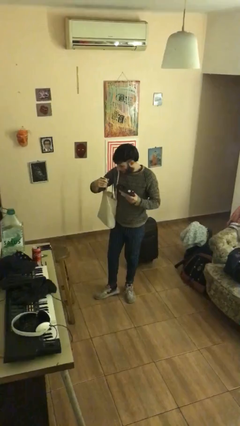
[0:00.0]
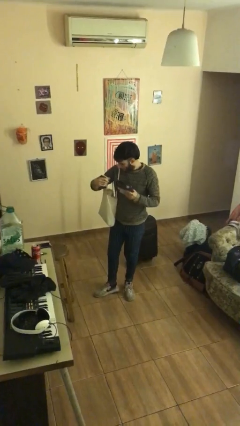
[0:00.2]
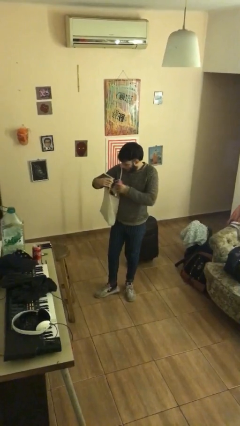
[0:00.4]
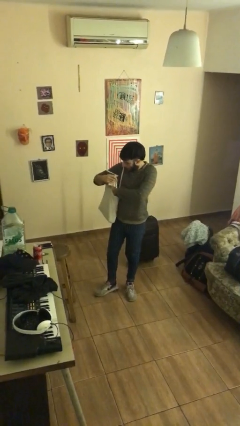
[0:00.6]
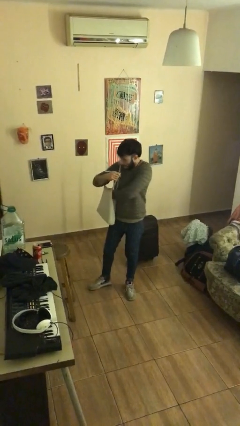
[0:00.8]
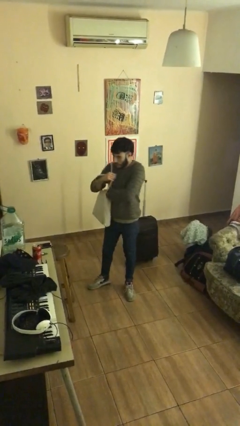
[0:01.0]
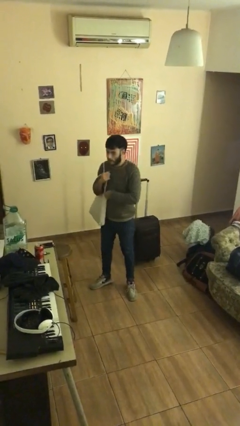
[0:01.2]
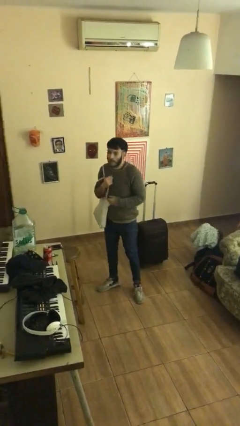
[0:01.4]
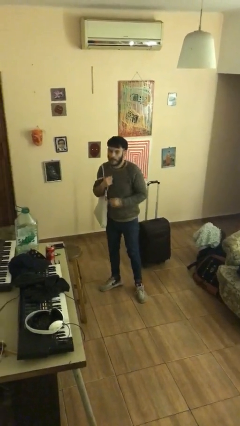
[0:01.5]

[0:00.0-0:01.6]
person puts object into purse

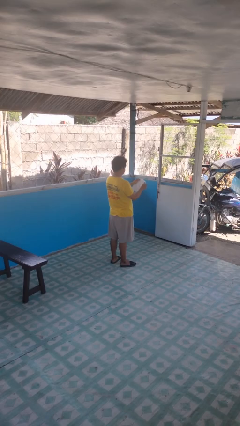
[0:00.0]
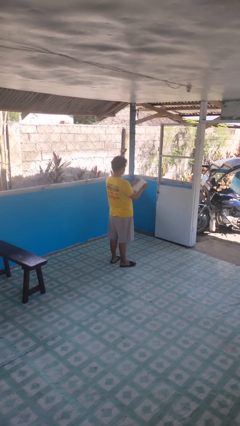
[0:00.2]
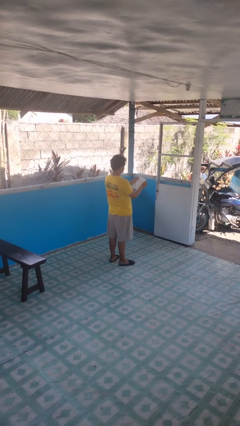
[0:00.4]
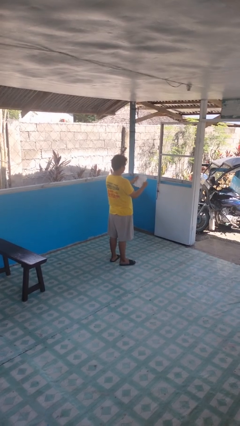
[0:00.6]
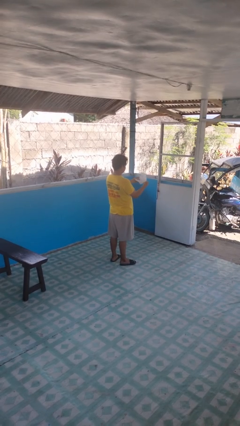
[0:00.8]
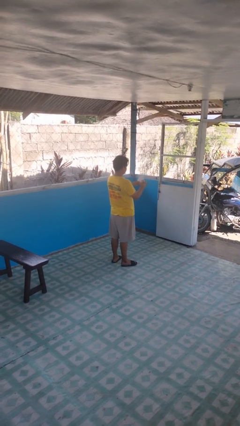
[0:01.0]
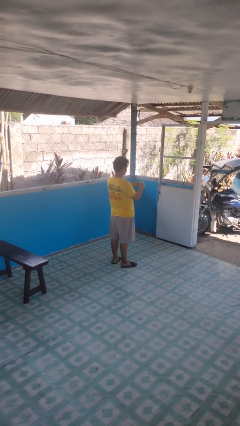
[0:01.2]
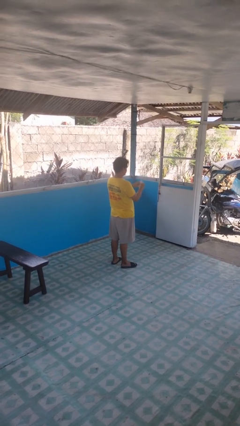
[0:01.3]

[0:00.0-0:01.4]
person crumples paper

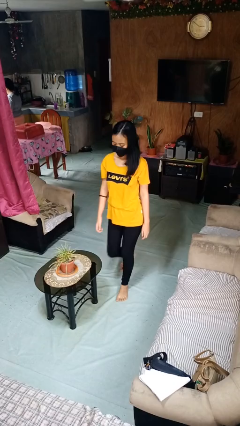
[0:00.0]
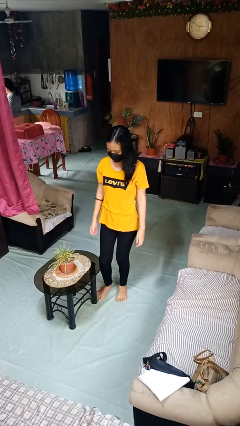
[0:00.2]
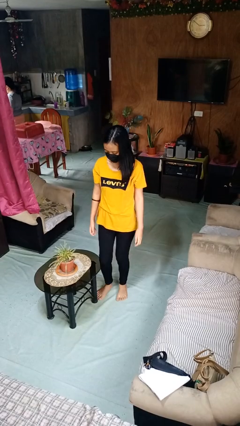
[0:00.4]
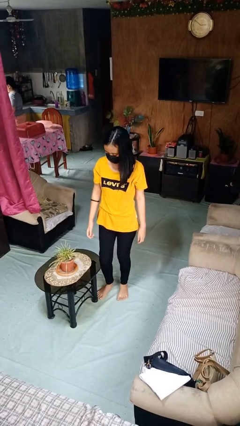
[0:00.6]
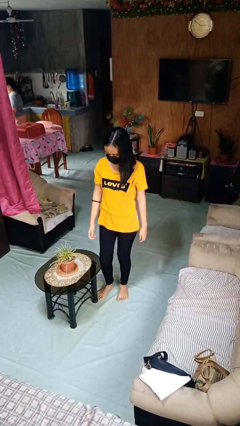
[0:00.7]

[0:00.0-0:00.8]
person bumps into table

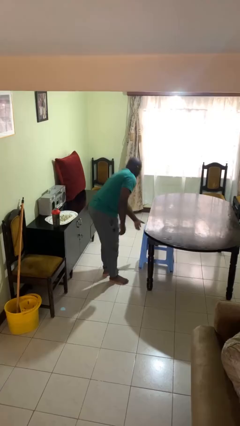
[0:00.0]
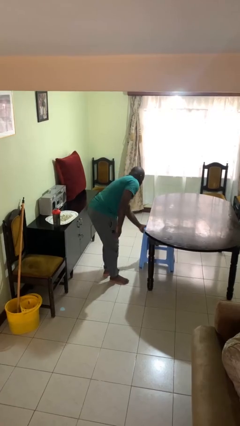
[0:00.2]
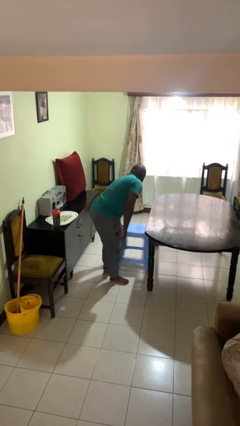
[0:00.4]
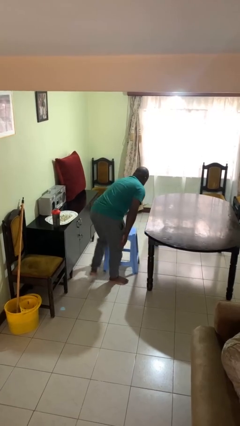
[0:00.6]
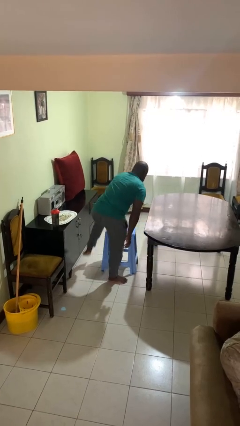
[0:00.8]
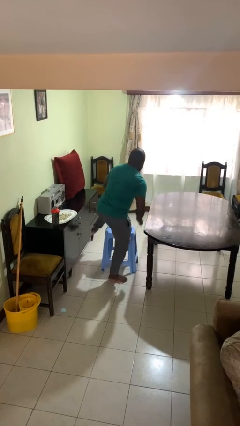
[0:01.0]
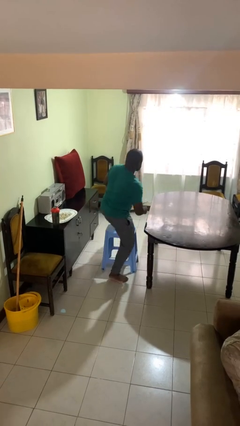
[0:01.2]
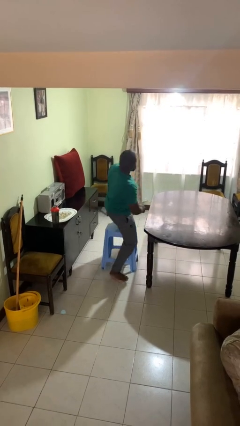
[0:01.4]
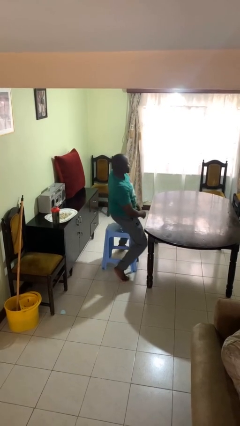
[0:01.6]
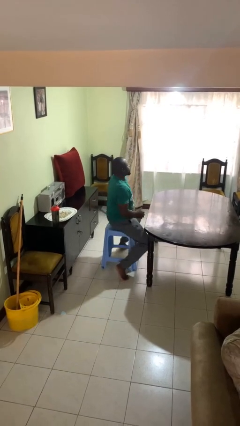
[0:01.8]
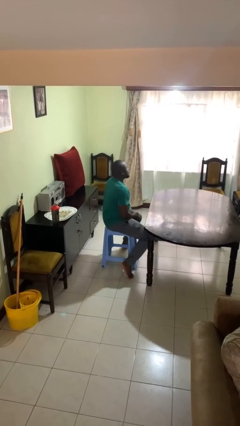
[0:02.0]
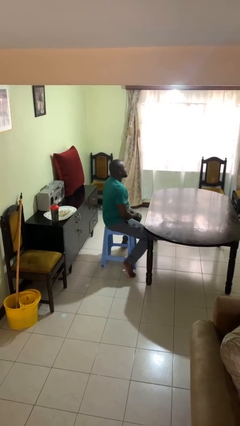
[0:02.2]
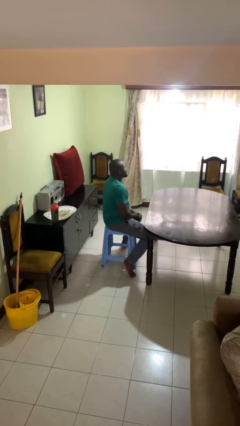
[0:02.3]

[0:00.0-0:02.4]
person sits down

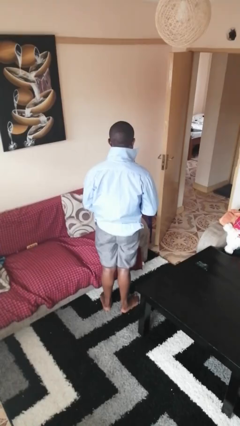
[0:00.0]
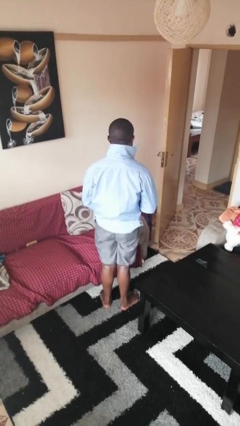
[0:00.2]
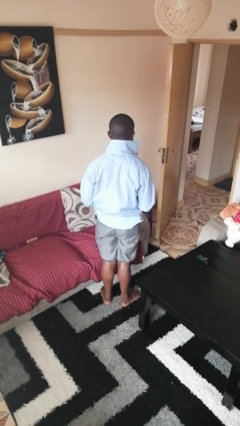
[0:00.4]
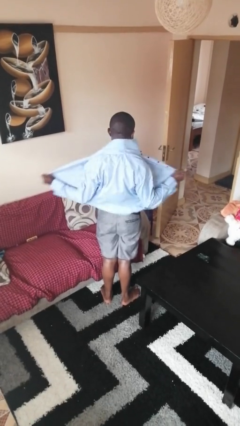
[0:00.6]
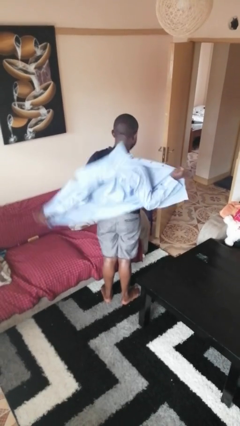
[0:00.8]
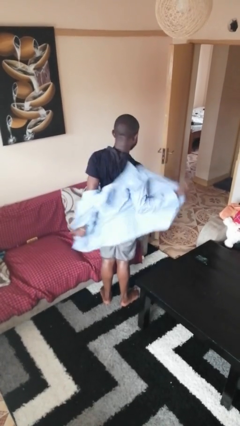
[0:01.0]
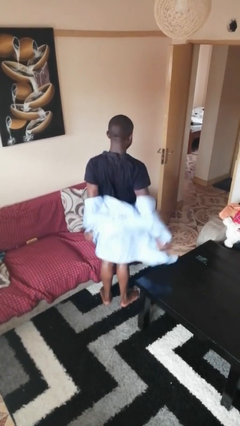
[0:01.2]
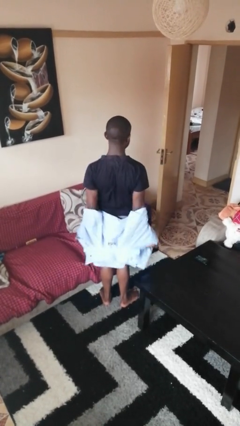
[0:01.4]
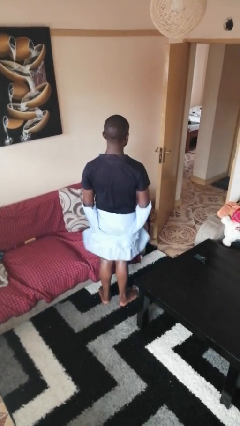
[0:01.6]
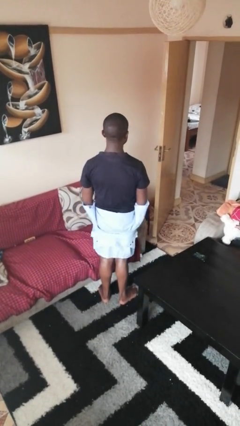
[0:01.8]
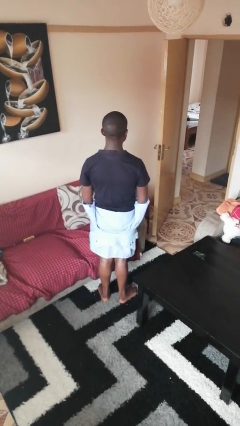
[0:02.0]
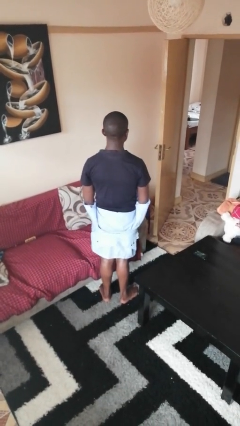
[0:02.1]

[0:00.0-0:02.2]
person takes off shirt

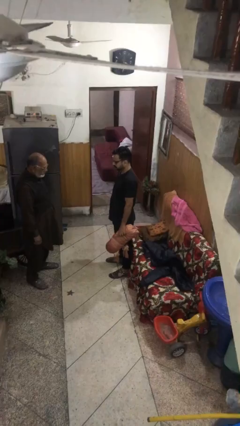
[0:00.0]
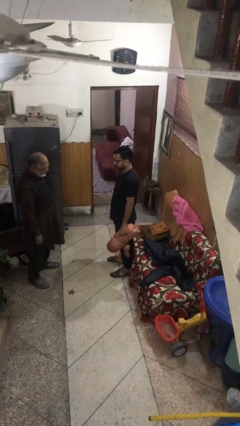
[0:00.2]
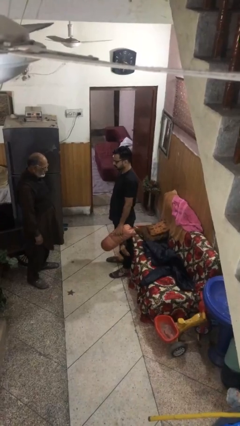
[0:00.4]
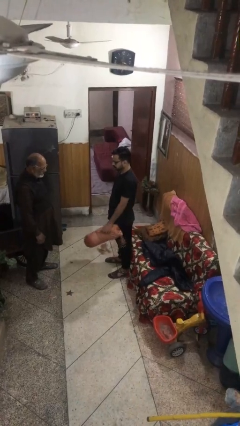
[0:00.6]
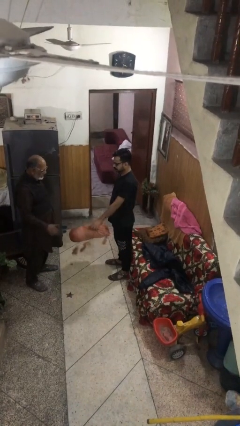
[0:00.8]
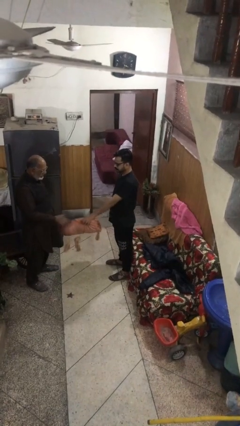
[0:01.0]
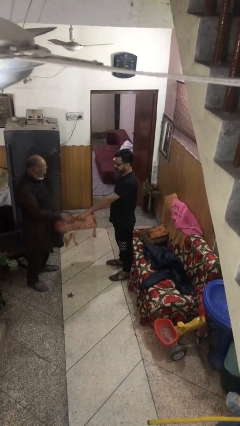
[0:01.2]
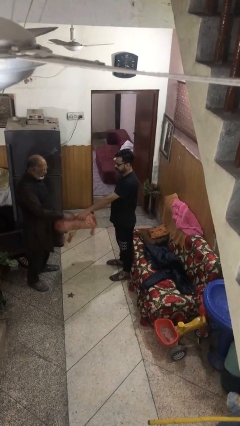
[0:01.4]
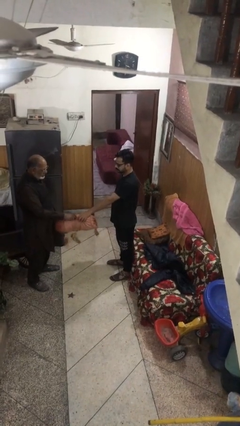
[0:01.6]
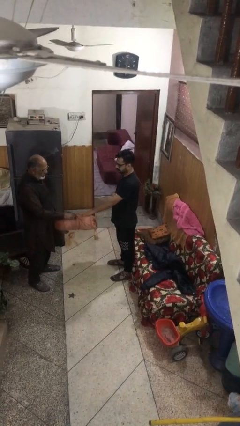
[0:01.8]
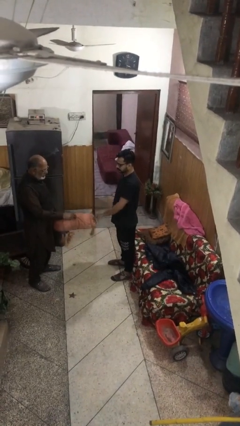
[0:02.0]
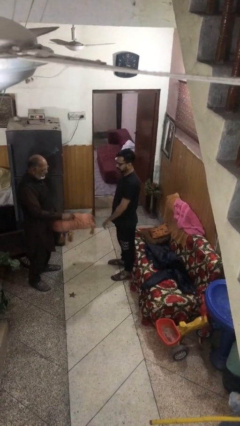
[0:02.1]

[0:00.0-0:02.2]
person transfers object to person

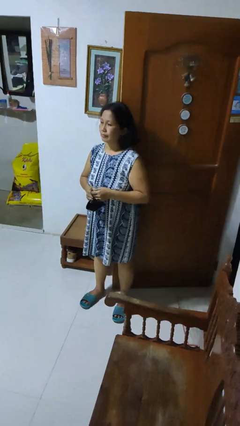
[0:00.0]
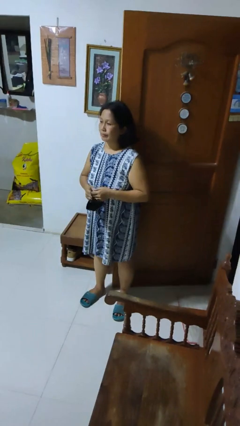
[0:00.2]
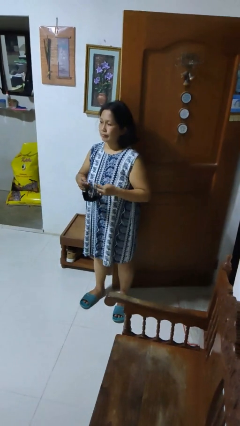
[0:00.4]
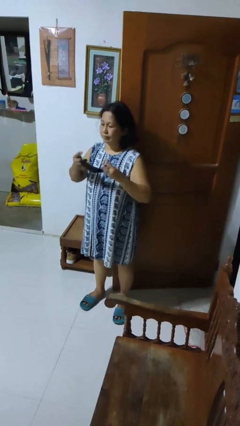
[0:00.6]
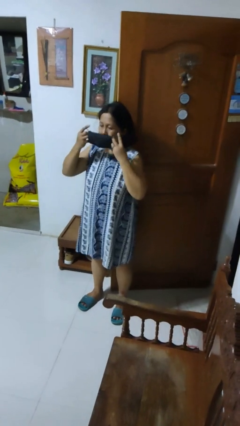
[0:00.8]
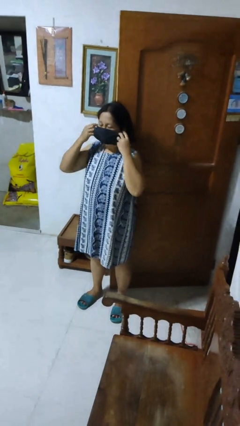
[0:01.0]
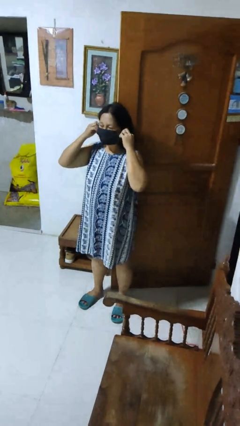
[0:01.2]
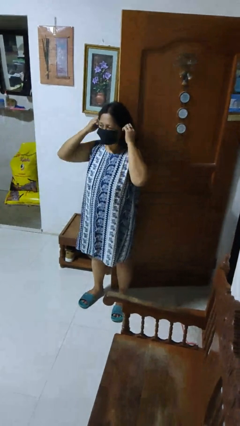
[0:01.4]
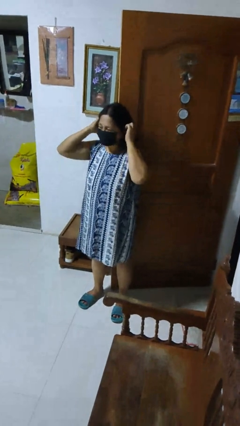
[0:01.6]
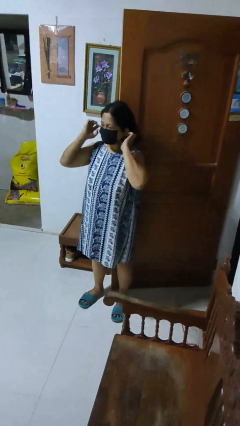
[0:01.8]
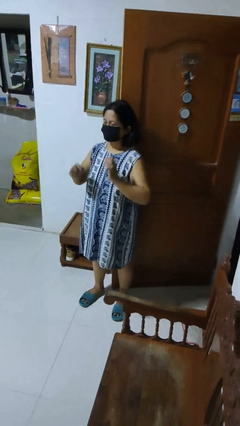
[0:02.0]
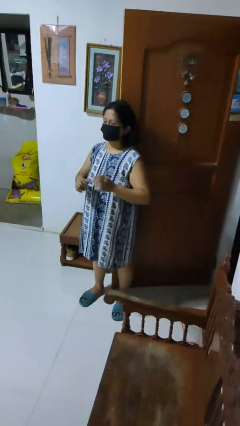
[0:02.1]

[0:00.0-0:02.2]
person puts on facemask

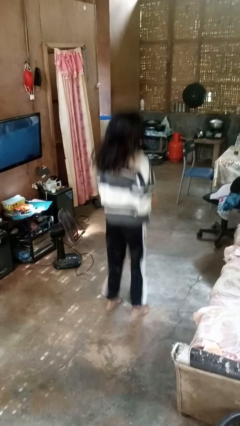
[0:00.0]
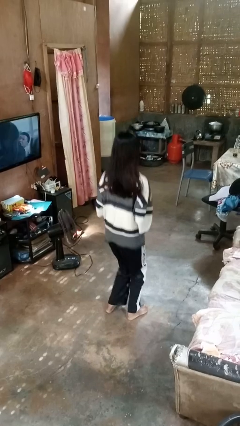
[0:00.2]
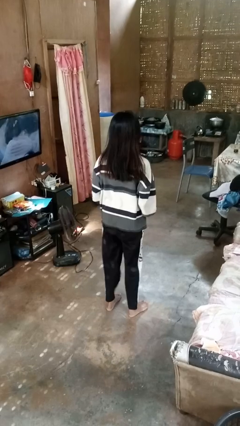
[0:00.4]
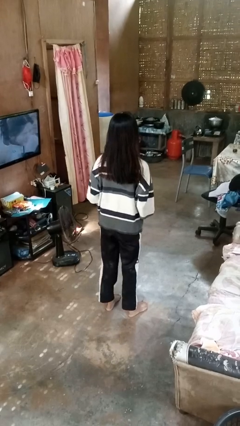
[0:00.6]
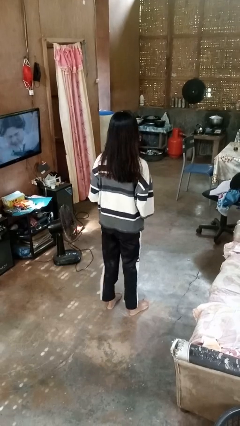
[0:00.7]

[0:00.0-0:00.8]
person jumps

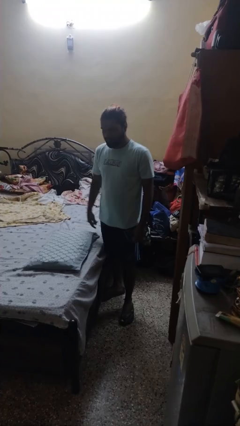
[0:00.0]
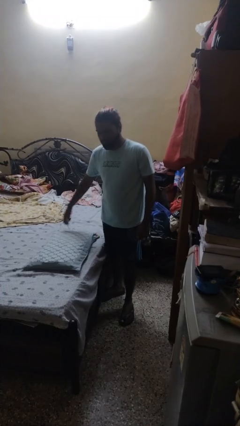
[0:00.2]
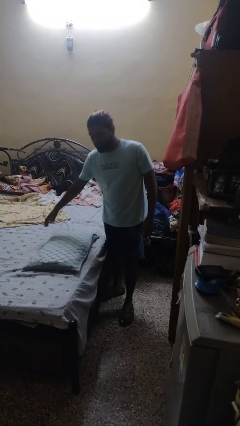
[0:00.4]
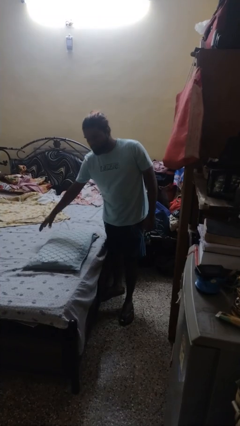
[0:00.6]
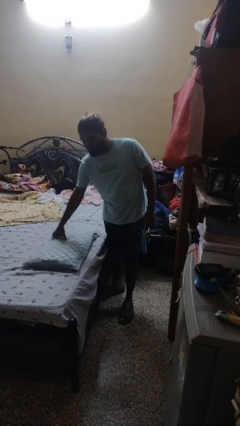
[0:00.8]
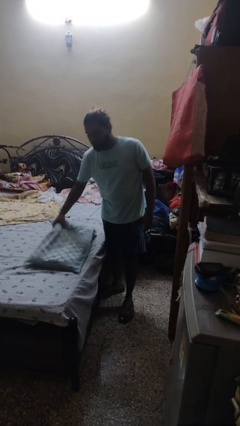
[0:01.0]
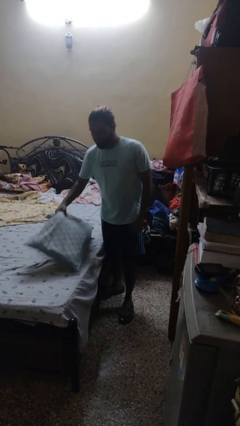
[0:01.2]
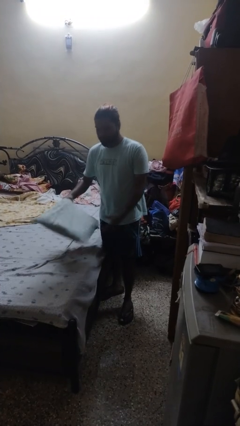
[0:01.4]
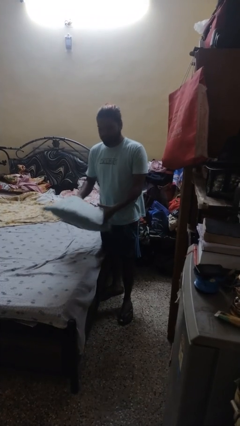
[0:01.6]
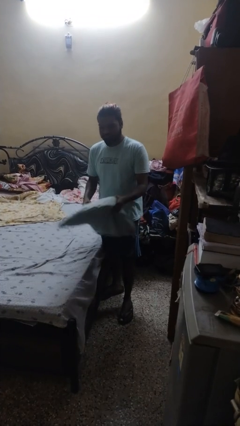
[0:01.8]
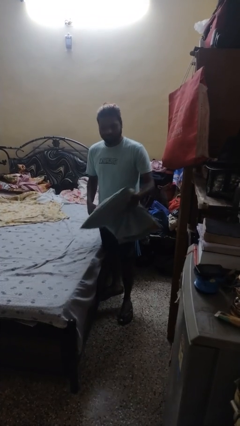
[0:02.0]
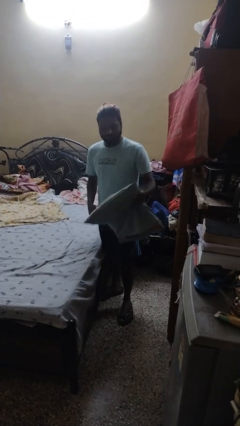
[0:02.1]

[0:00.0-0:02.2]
person picks up object from bed

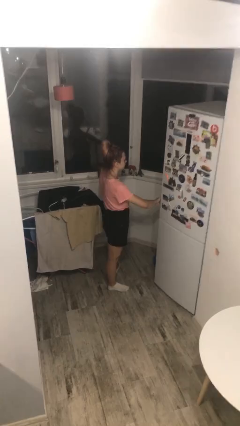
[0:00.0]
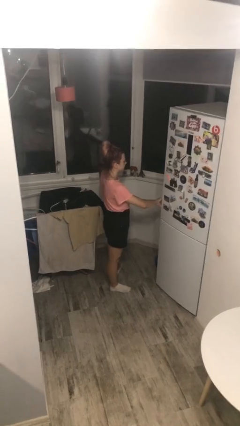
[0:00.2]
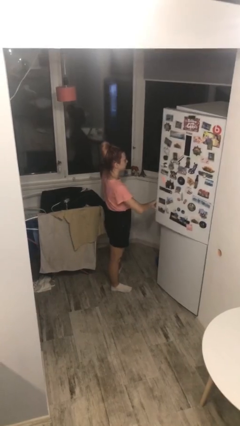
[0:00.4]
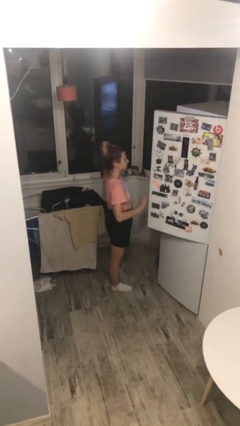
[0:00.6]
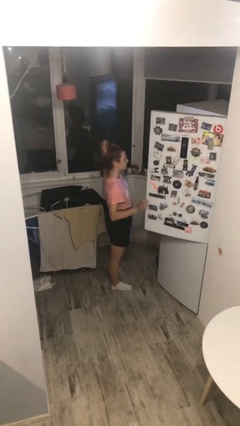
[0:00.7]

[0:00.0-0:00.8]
person opens refrigerator
